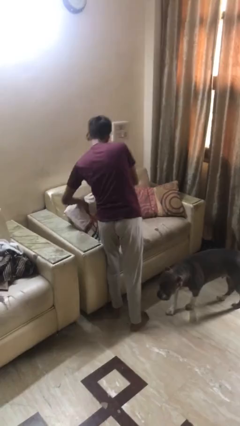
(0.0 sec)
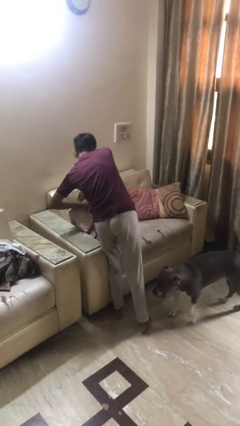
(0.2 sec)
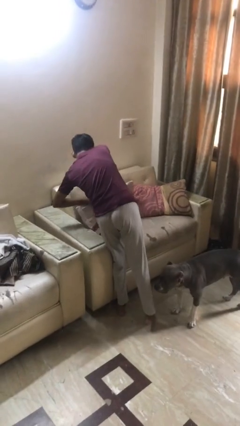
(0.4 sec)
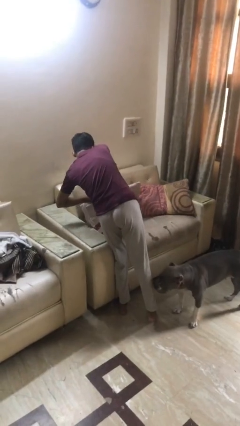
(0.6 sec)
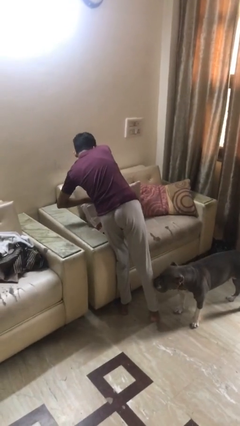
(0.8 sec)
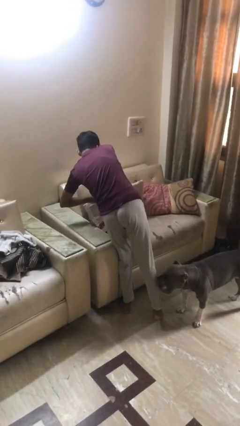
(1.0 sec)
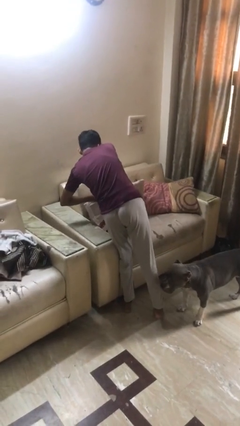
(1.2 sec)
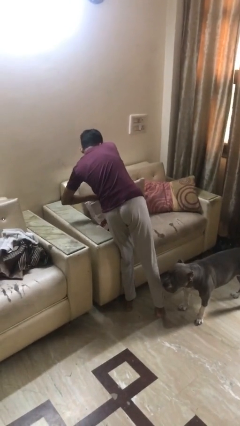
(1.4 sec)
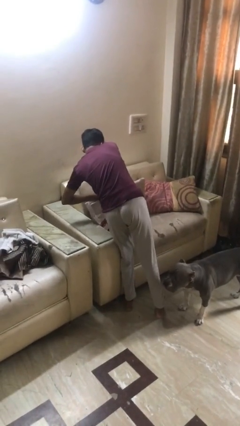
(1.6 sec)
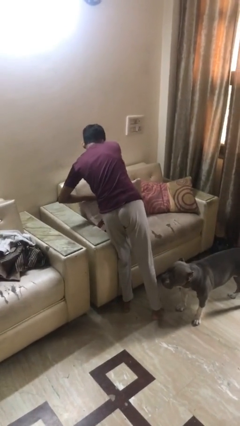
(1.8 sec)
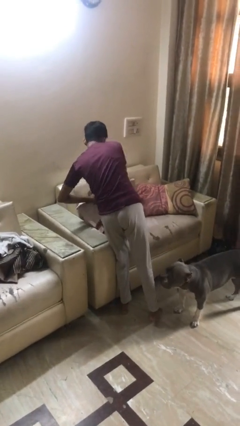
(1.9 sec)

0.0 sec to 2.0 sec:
person searches in couch

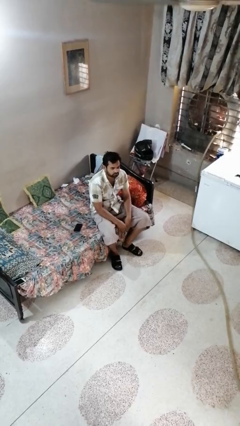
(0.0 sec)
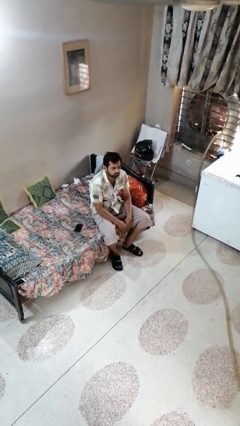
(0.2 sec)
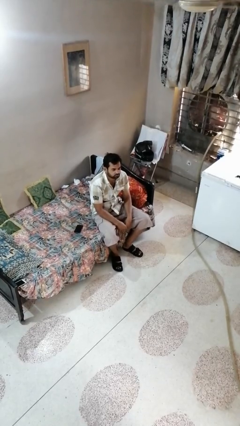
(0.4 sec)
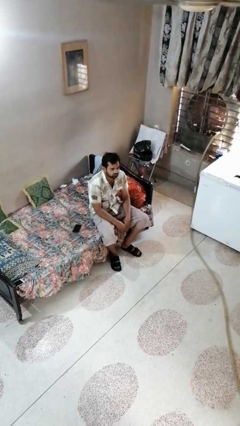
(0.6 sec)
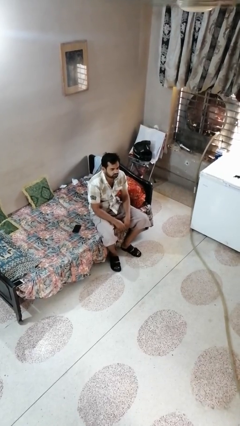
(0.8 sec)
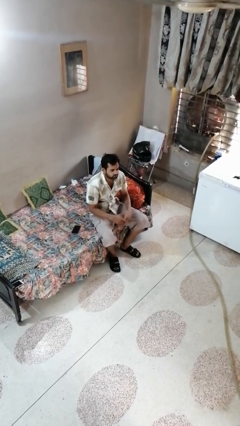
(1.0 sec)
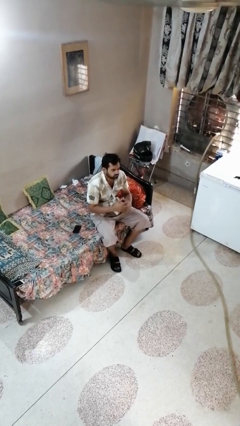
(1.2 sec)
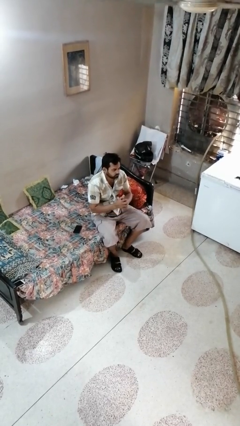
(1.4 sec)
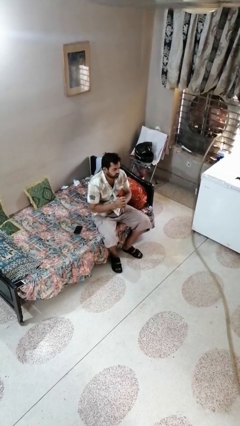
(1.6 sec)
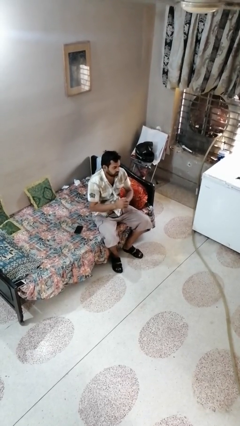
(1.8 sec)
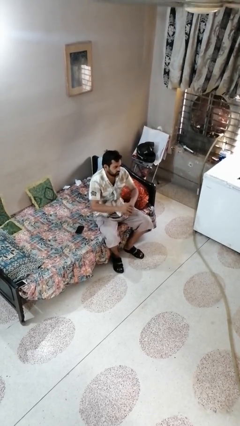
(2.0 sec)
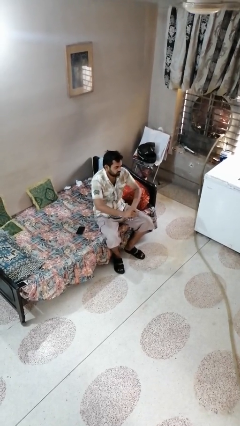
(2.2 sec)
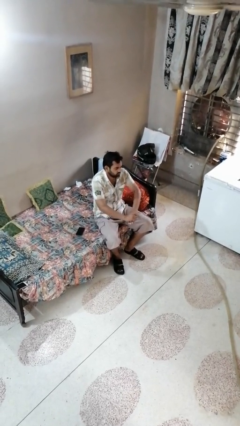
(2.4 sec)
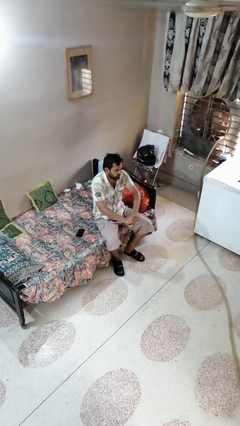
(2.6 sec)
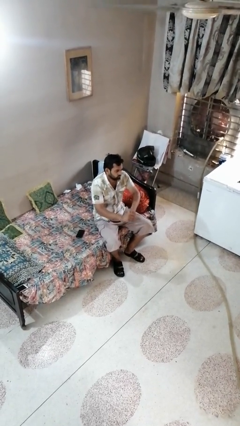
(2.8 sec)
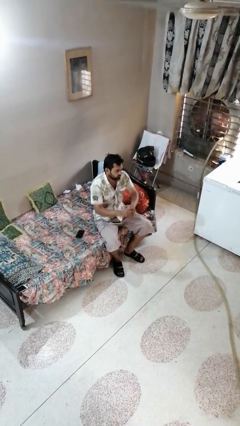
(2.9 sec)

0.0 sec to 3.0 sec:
person cracks knuckles

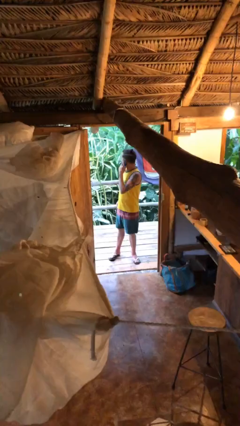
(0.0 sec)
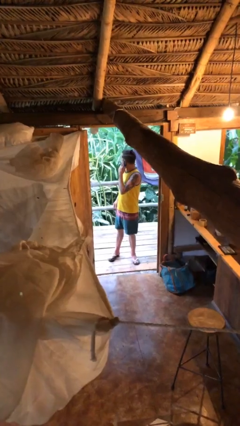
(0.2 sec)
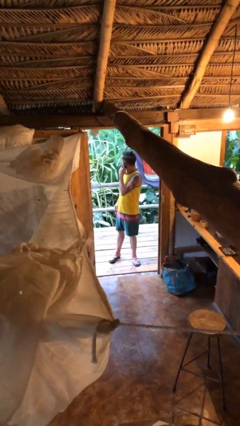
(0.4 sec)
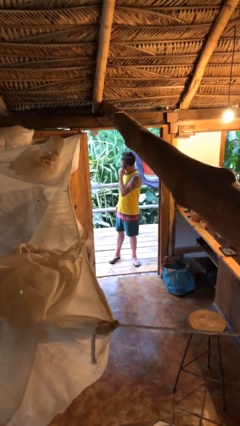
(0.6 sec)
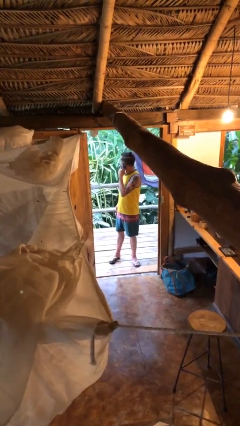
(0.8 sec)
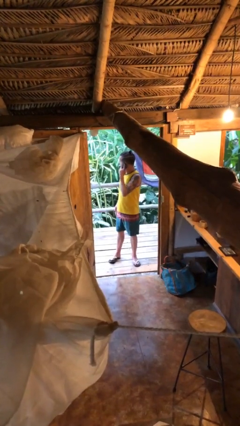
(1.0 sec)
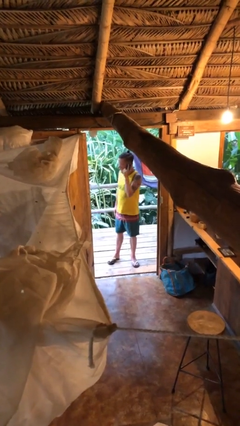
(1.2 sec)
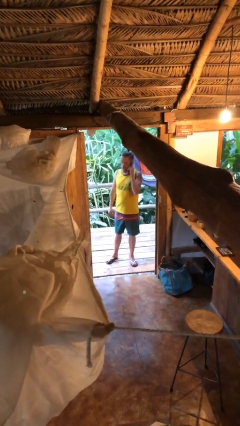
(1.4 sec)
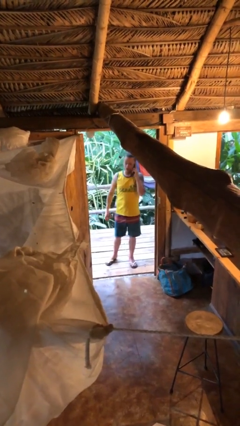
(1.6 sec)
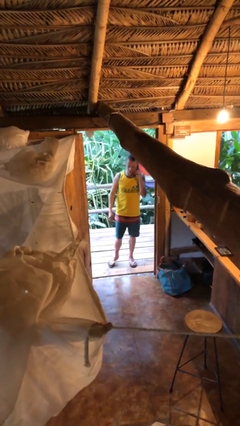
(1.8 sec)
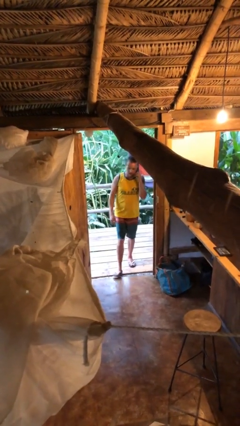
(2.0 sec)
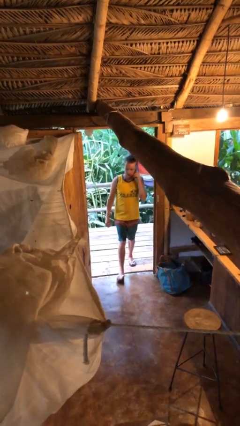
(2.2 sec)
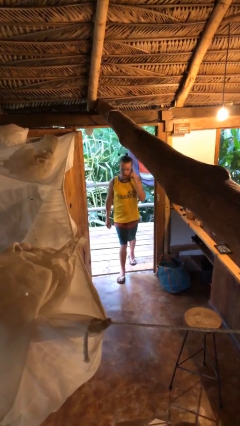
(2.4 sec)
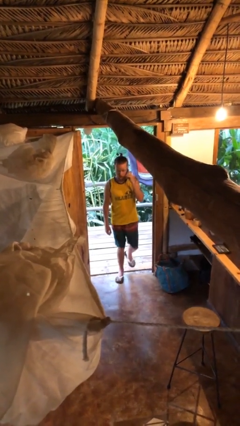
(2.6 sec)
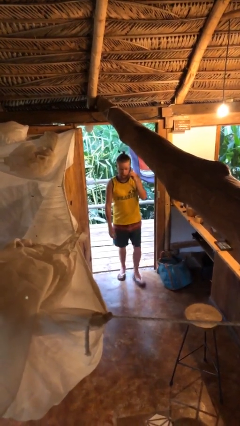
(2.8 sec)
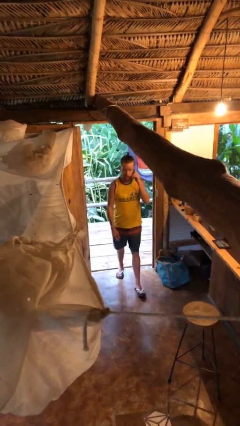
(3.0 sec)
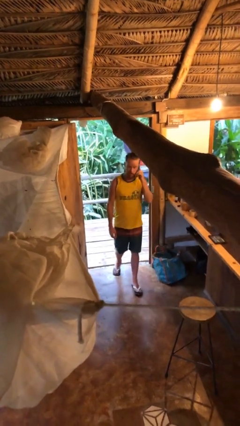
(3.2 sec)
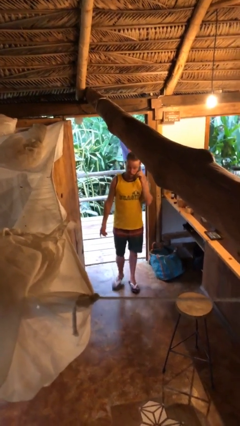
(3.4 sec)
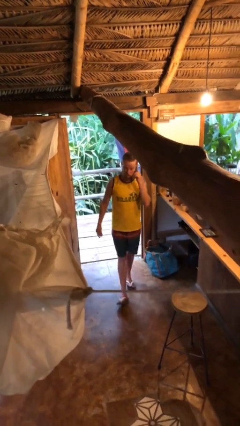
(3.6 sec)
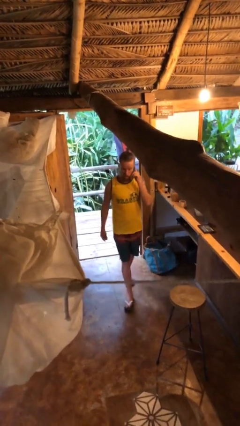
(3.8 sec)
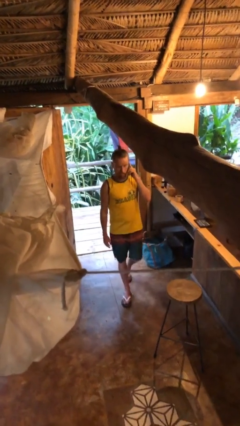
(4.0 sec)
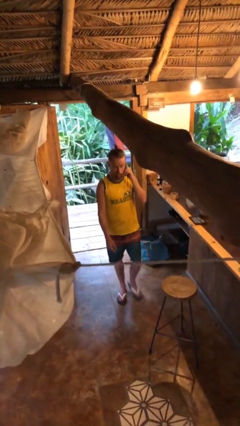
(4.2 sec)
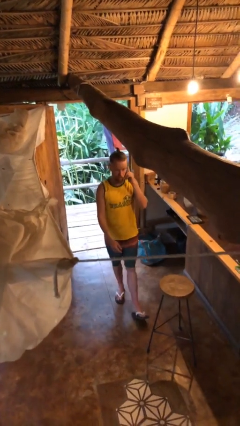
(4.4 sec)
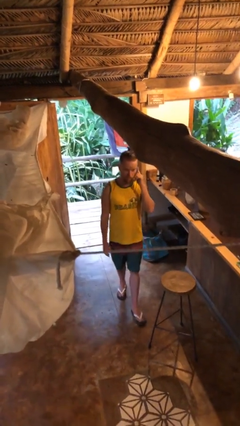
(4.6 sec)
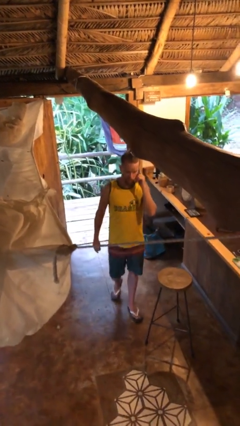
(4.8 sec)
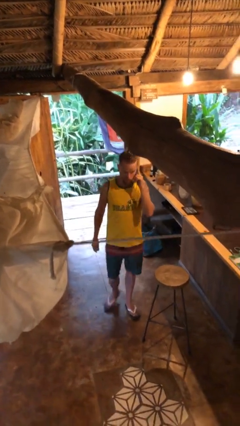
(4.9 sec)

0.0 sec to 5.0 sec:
person enters scene through structure

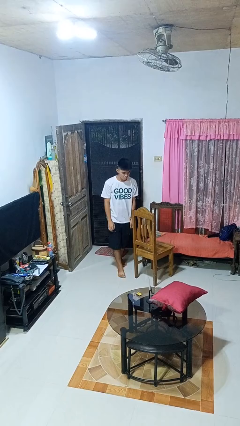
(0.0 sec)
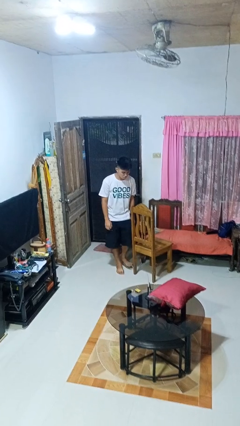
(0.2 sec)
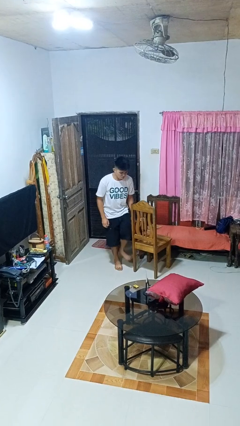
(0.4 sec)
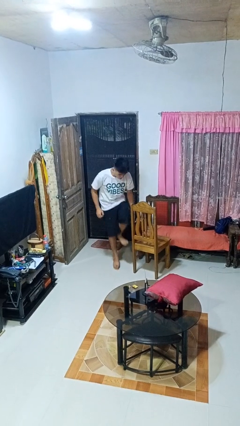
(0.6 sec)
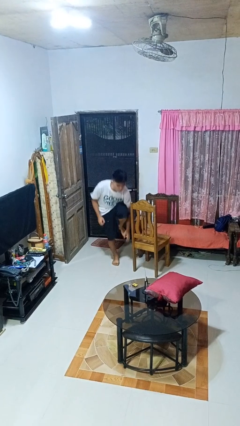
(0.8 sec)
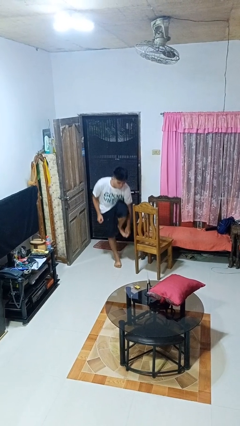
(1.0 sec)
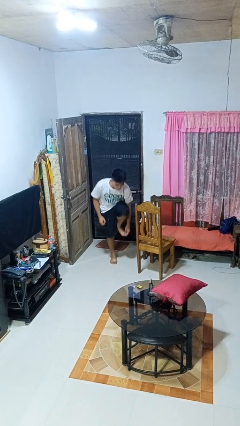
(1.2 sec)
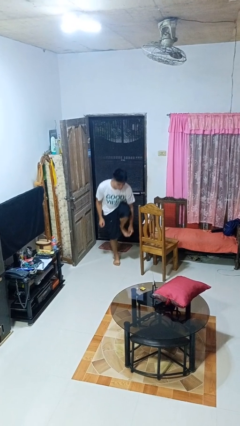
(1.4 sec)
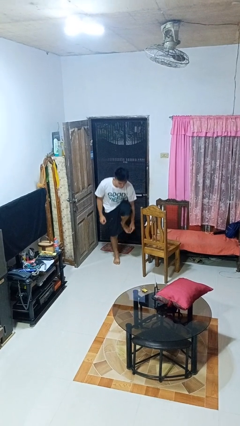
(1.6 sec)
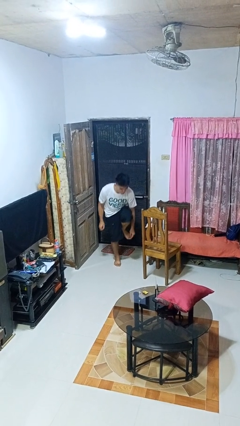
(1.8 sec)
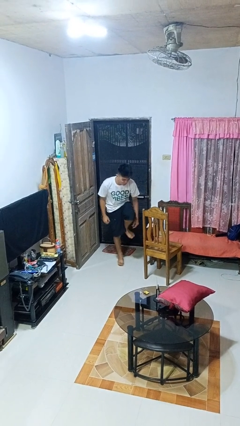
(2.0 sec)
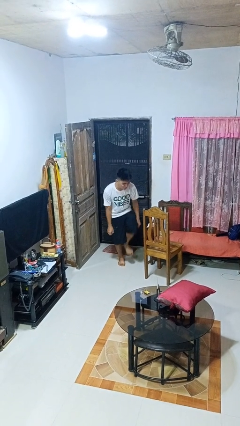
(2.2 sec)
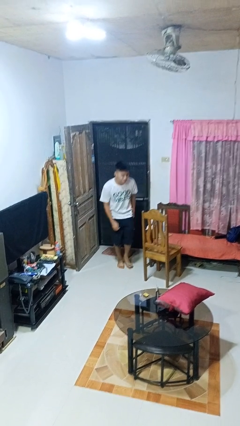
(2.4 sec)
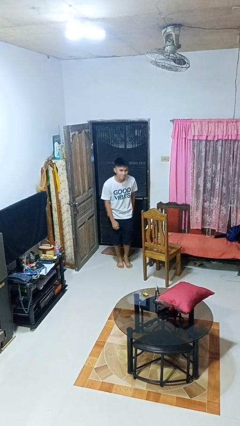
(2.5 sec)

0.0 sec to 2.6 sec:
person stubs toe

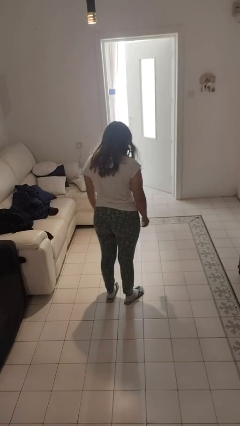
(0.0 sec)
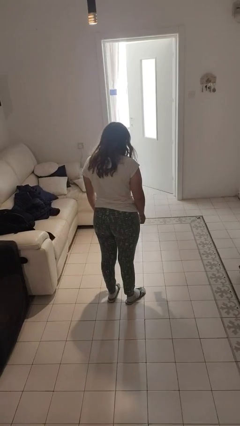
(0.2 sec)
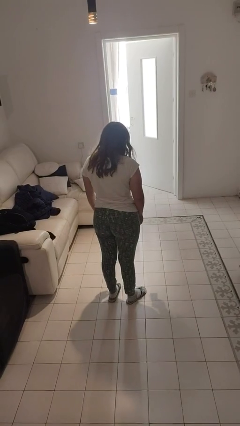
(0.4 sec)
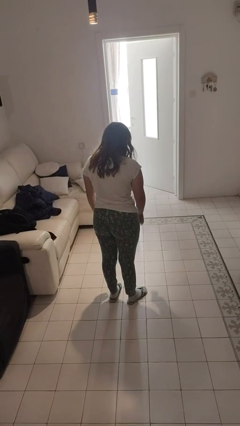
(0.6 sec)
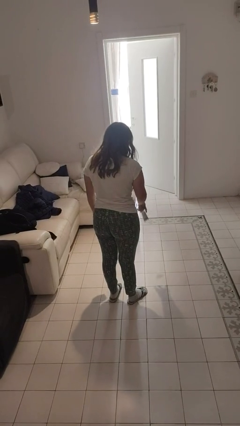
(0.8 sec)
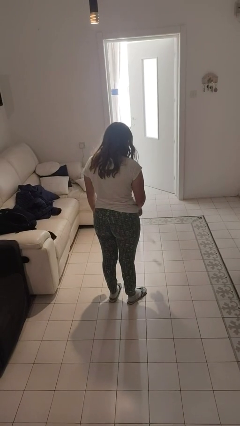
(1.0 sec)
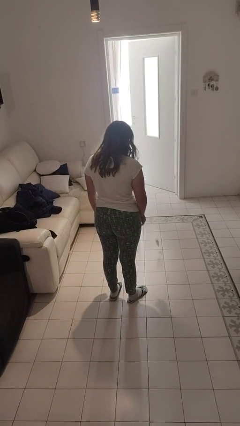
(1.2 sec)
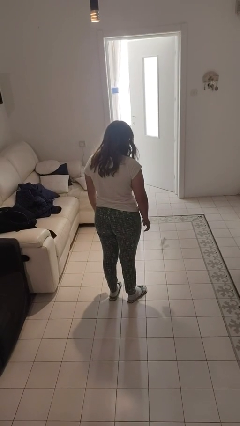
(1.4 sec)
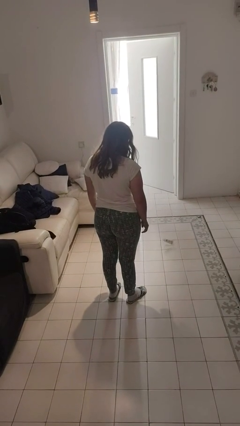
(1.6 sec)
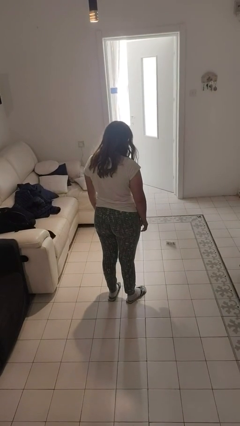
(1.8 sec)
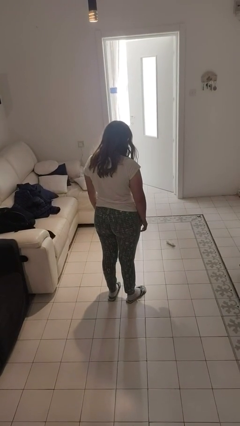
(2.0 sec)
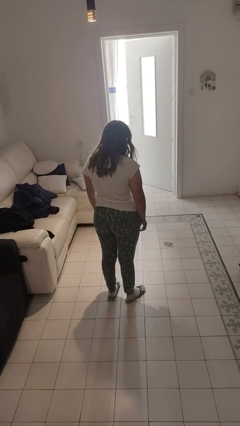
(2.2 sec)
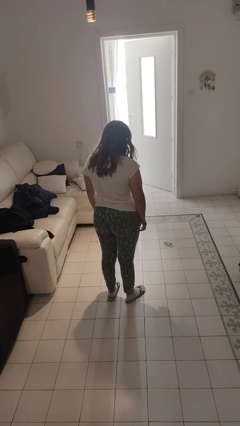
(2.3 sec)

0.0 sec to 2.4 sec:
person throws object to ground

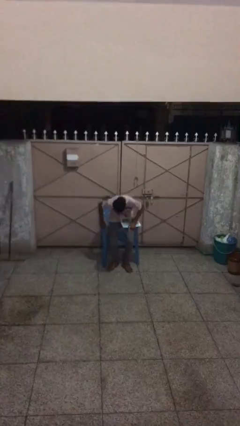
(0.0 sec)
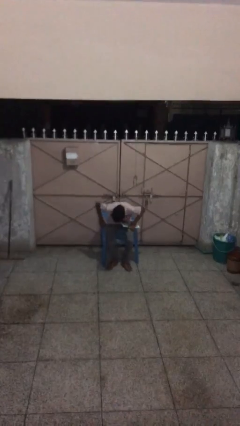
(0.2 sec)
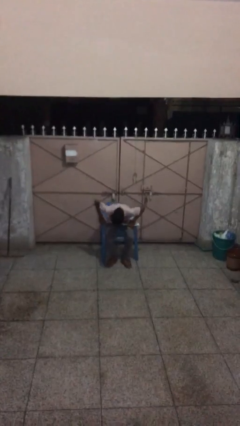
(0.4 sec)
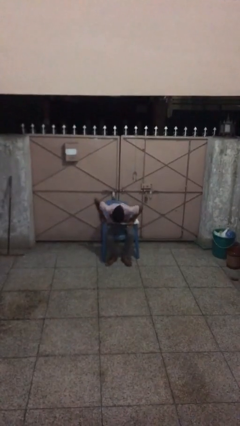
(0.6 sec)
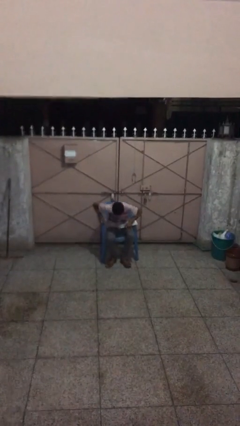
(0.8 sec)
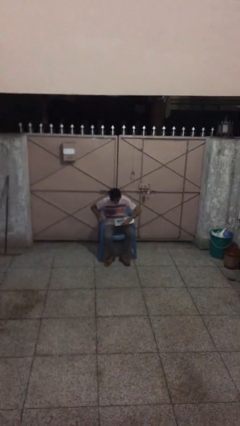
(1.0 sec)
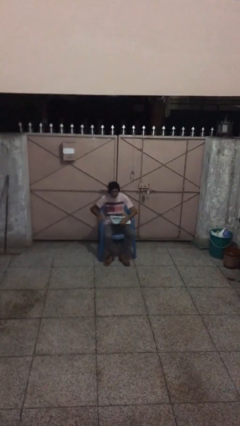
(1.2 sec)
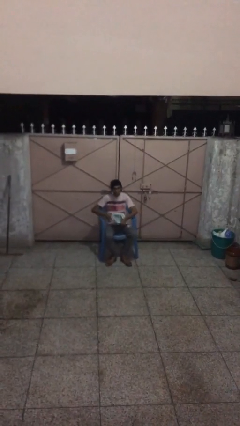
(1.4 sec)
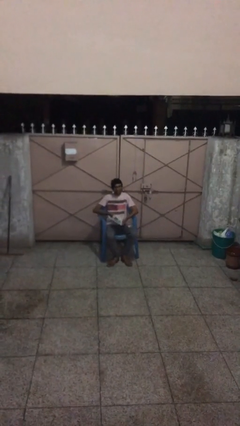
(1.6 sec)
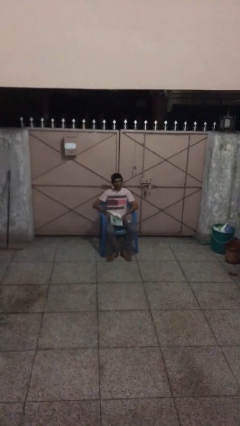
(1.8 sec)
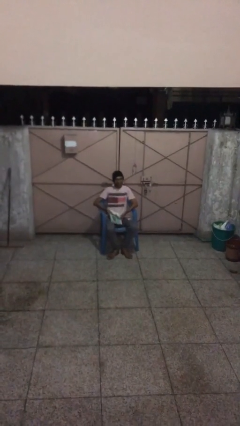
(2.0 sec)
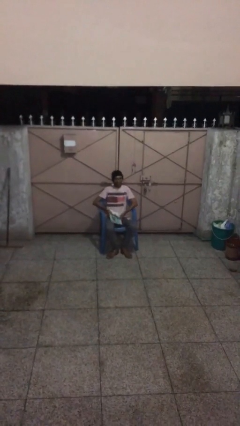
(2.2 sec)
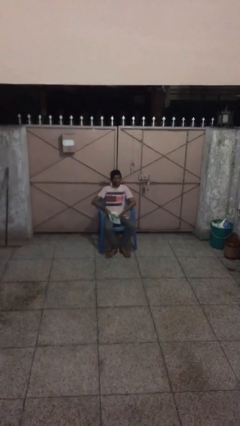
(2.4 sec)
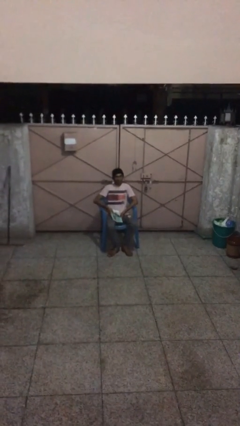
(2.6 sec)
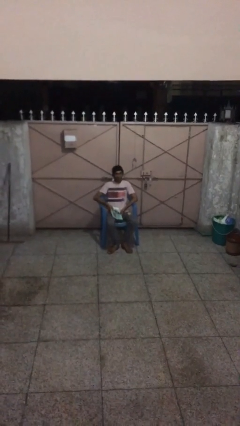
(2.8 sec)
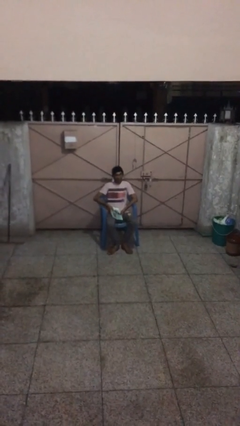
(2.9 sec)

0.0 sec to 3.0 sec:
person sits down
